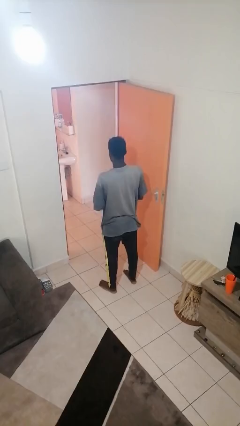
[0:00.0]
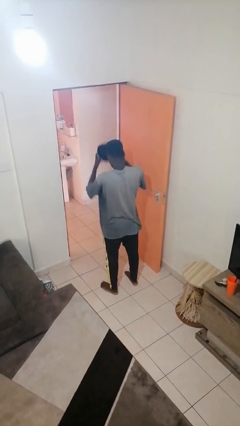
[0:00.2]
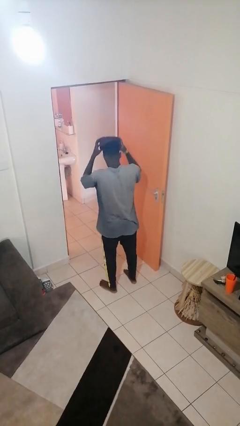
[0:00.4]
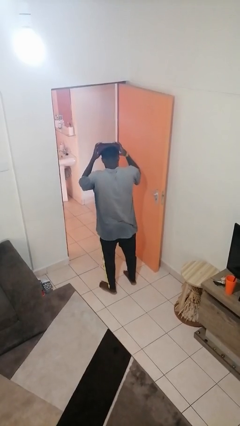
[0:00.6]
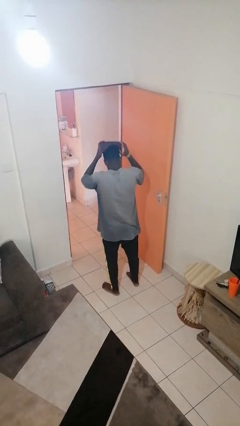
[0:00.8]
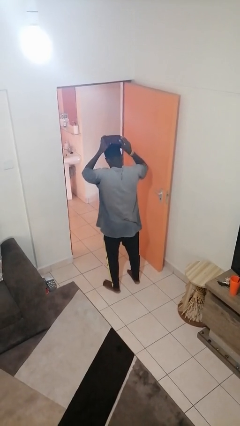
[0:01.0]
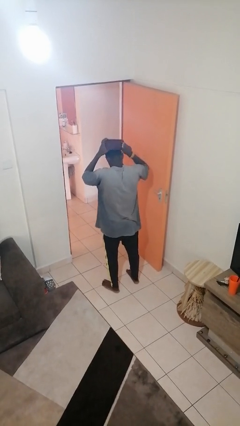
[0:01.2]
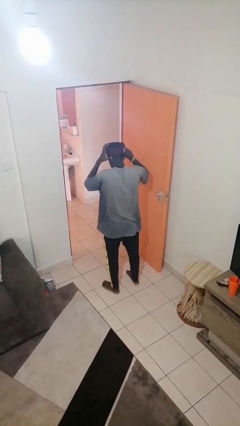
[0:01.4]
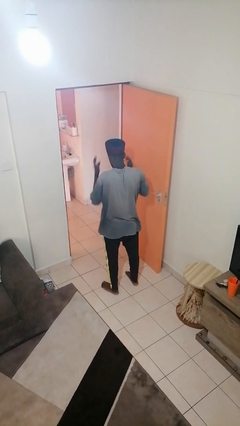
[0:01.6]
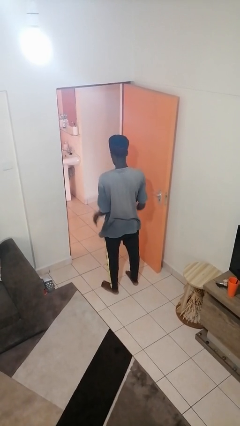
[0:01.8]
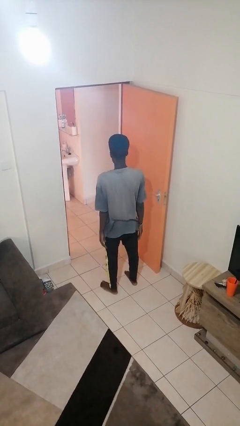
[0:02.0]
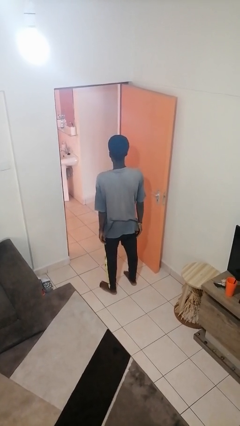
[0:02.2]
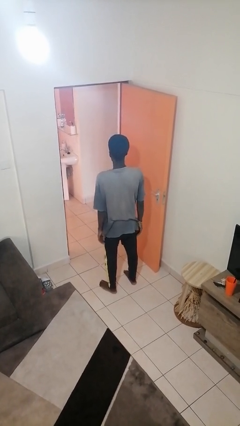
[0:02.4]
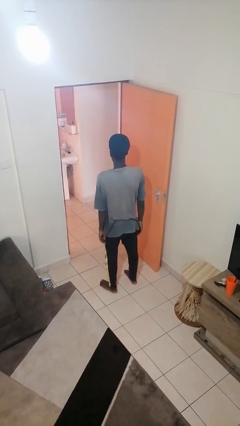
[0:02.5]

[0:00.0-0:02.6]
person puts on hat

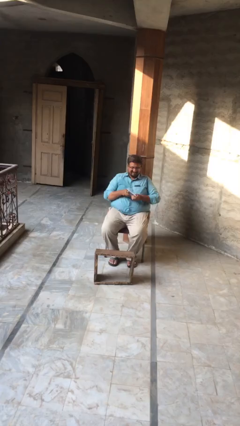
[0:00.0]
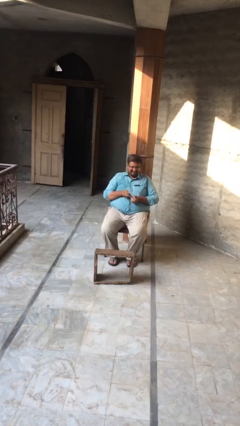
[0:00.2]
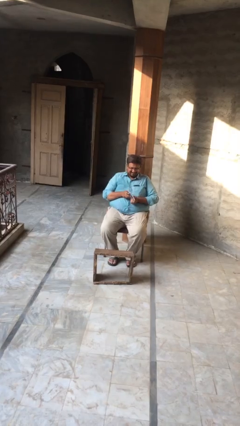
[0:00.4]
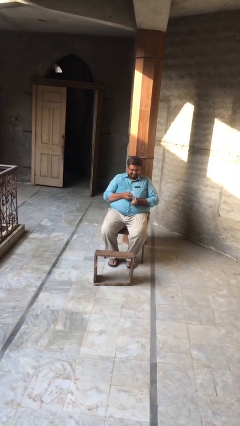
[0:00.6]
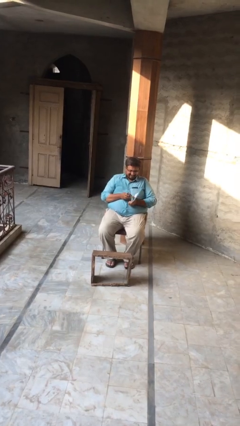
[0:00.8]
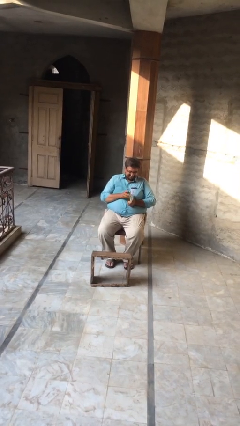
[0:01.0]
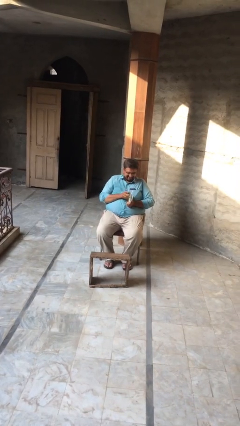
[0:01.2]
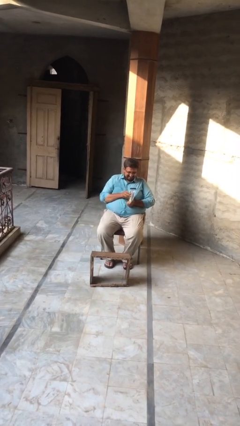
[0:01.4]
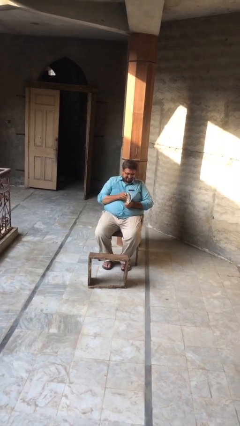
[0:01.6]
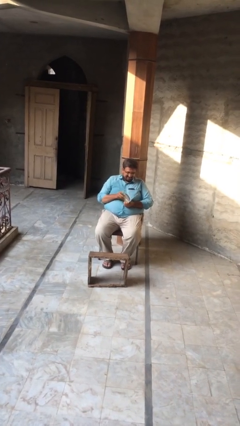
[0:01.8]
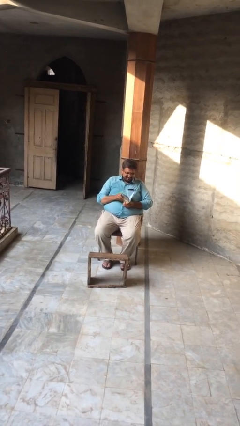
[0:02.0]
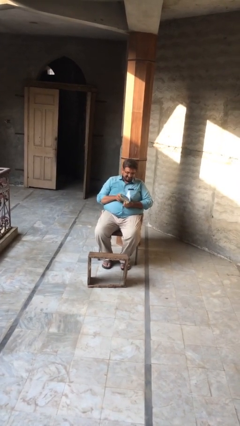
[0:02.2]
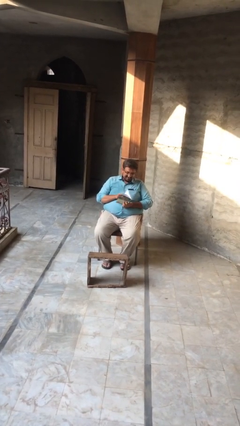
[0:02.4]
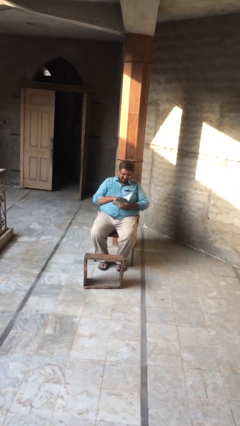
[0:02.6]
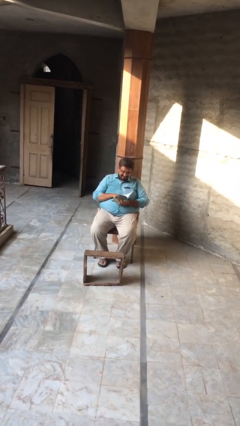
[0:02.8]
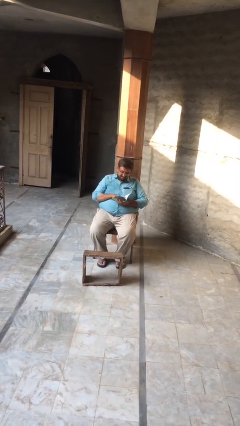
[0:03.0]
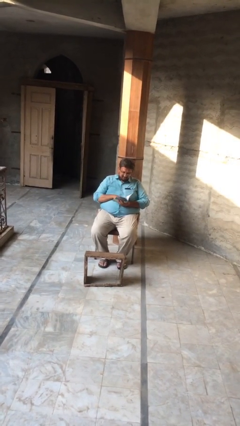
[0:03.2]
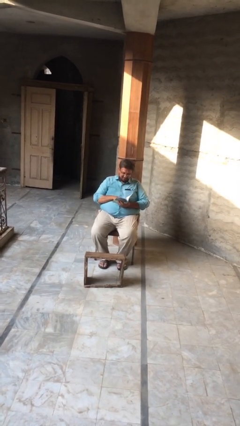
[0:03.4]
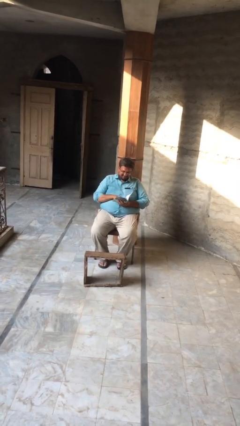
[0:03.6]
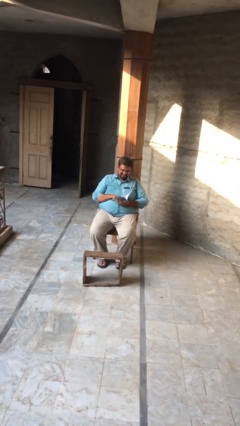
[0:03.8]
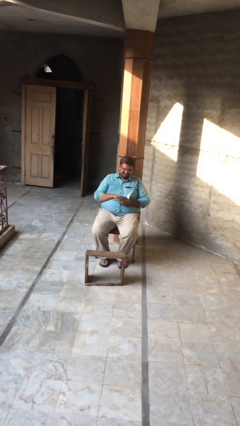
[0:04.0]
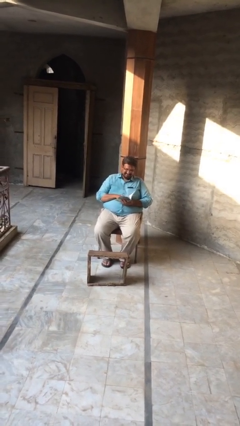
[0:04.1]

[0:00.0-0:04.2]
person reads document

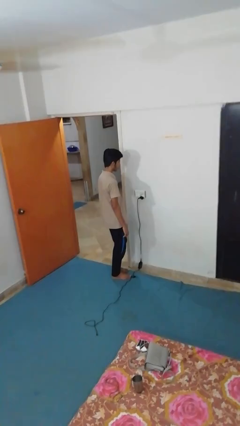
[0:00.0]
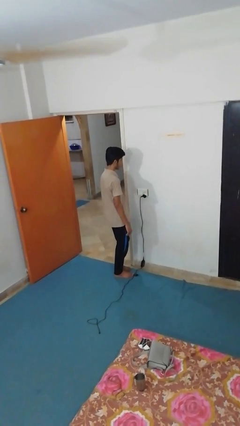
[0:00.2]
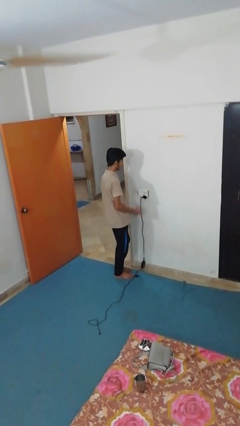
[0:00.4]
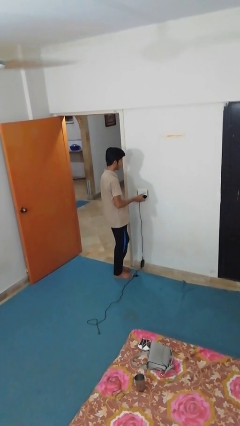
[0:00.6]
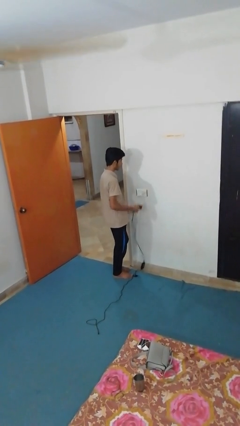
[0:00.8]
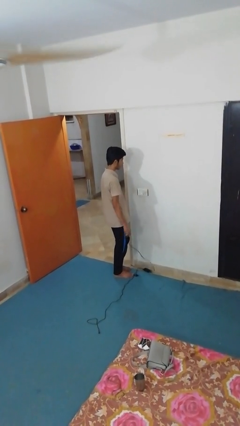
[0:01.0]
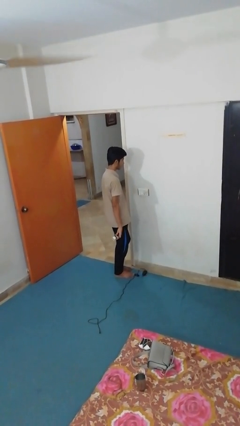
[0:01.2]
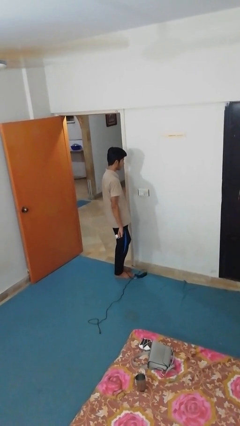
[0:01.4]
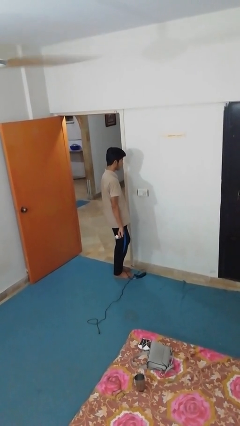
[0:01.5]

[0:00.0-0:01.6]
person unplugs from electrical socket

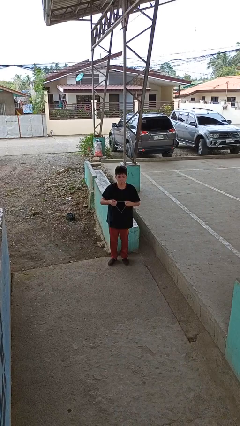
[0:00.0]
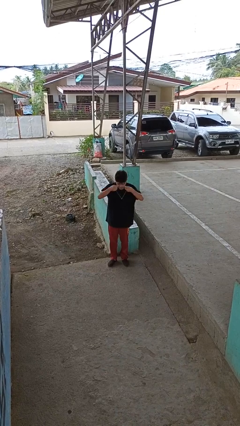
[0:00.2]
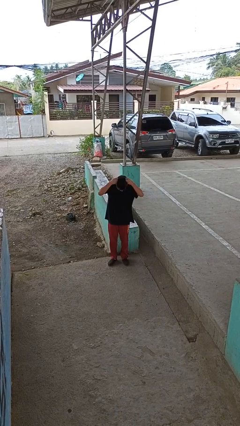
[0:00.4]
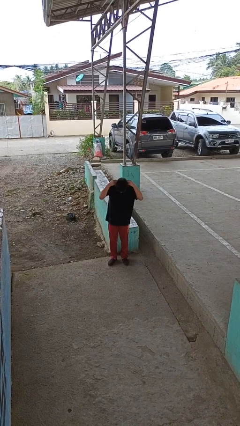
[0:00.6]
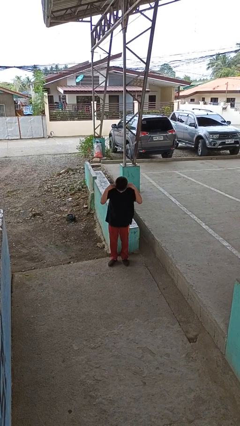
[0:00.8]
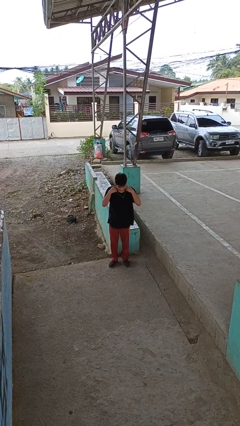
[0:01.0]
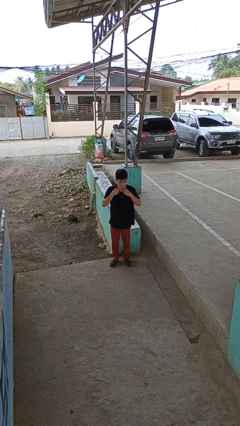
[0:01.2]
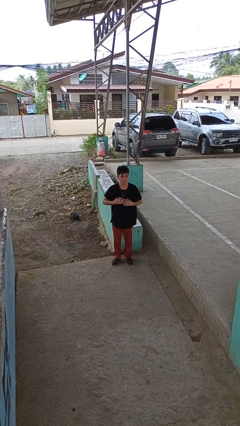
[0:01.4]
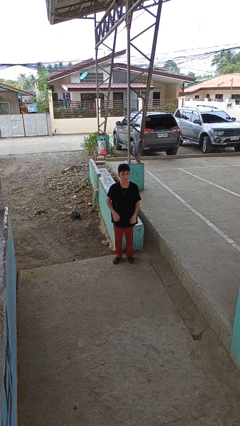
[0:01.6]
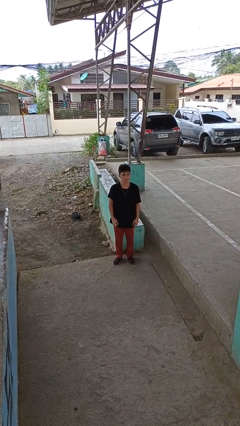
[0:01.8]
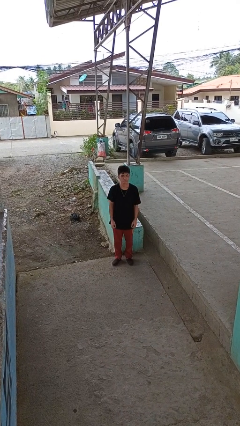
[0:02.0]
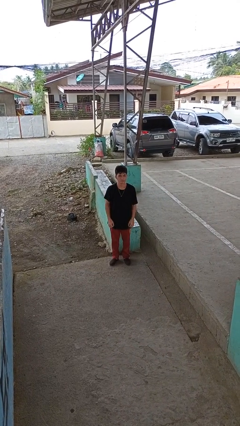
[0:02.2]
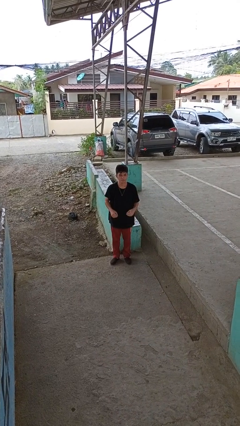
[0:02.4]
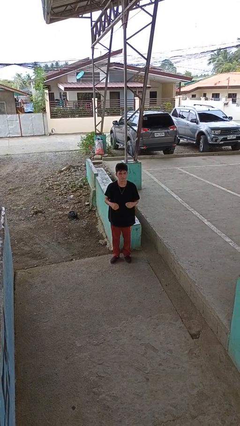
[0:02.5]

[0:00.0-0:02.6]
person puts on necklace

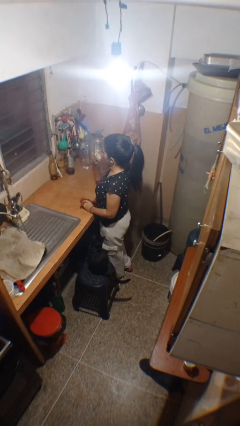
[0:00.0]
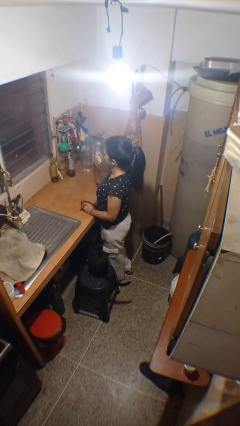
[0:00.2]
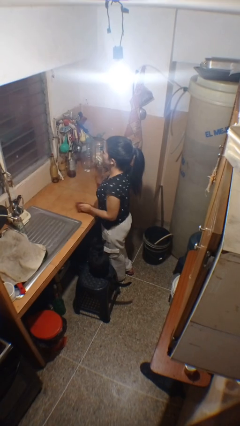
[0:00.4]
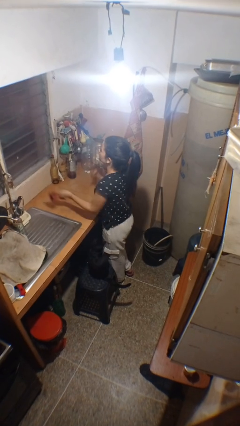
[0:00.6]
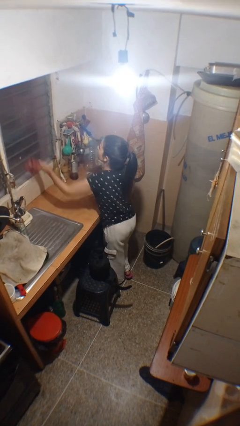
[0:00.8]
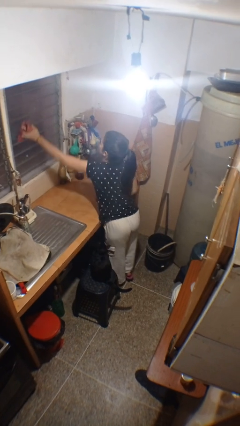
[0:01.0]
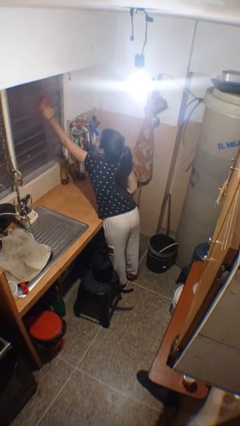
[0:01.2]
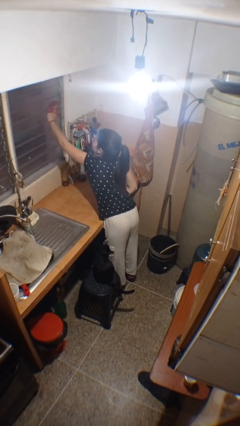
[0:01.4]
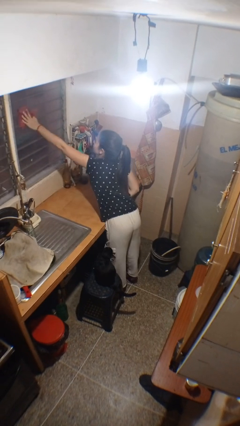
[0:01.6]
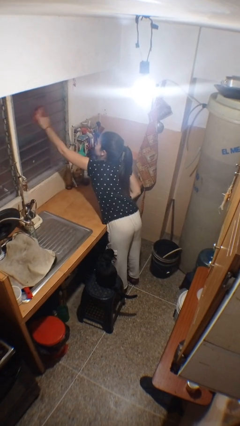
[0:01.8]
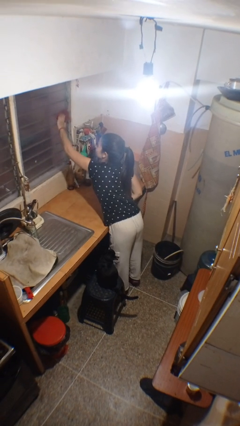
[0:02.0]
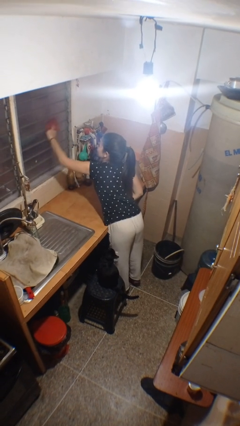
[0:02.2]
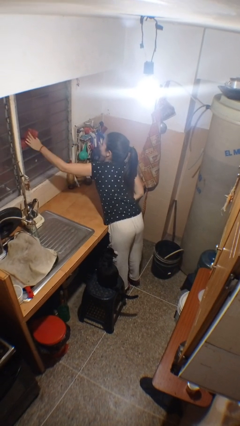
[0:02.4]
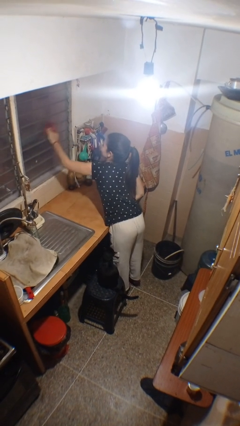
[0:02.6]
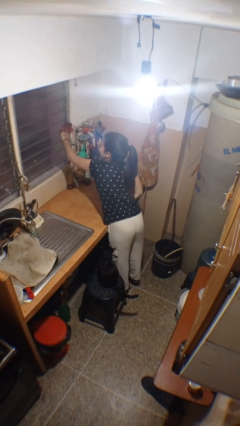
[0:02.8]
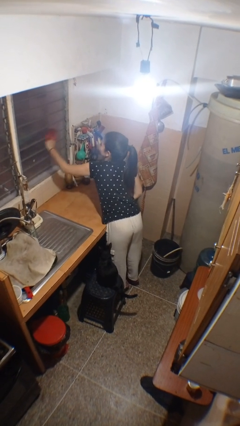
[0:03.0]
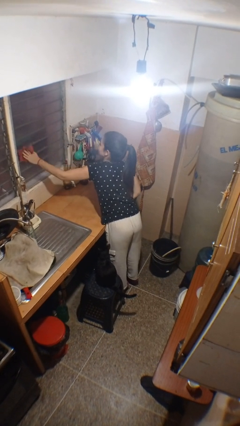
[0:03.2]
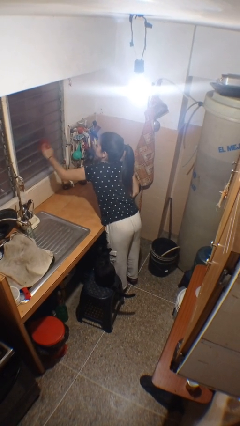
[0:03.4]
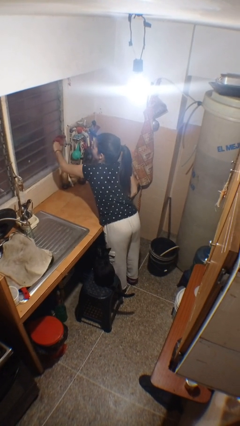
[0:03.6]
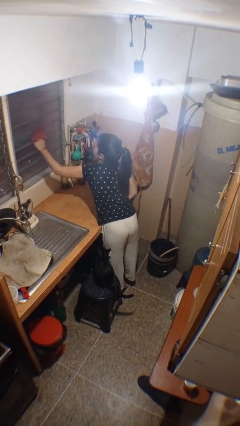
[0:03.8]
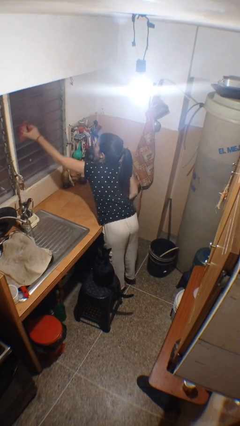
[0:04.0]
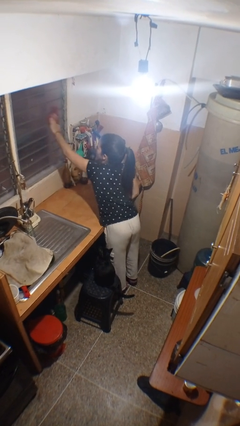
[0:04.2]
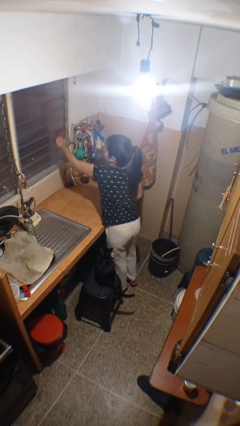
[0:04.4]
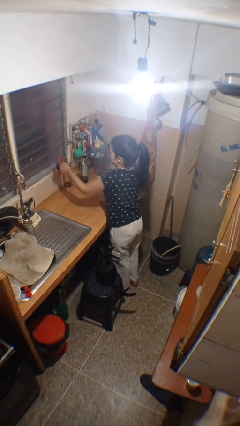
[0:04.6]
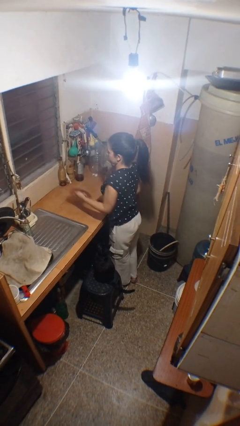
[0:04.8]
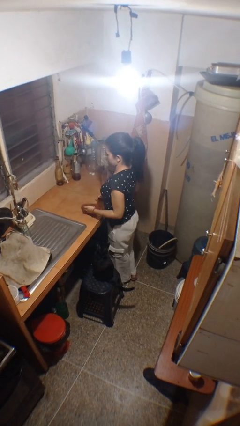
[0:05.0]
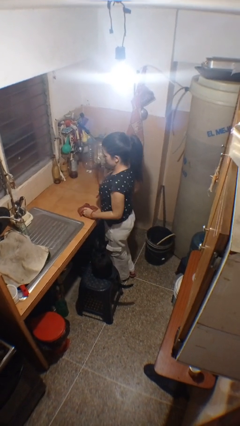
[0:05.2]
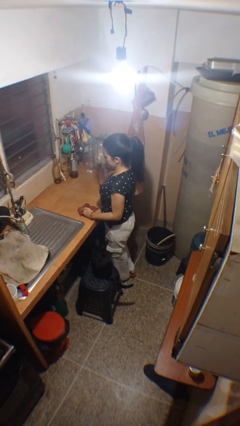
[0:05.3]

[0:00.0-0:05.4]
person washes window

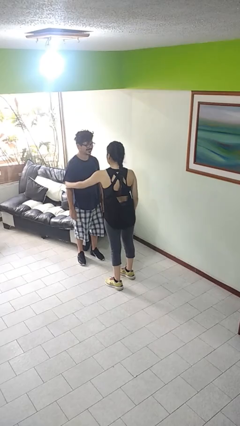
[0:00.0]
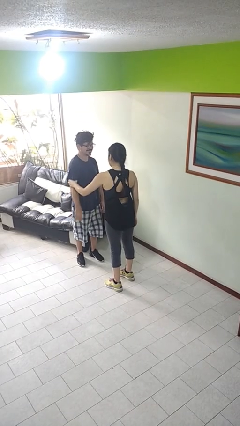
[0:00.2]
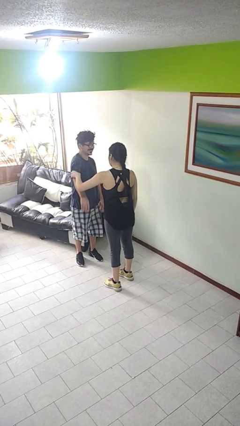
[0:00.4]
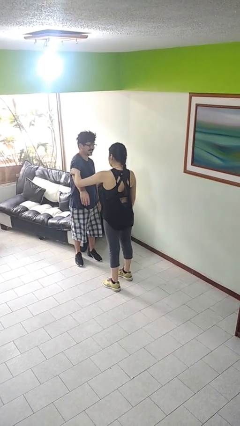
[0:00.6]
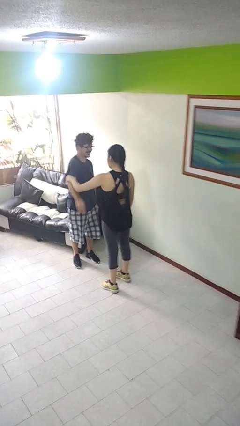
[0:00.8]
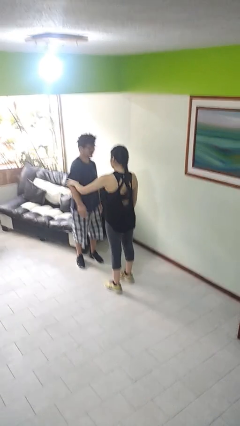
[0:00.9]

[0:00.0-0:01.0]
person grabs person by bicep
